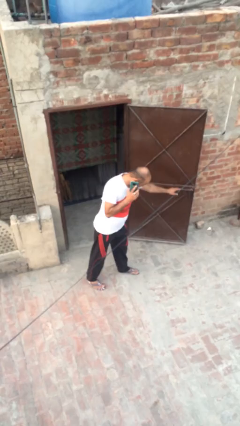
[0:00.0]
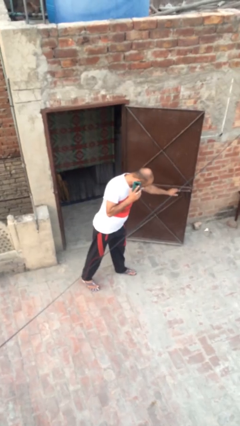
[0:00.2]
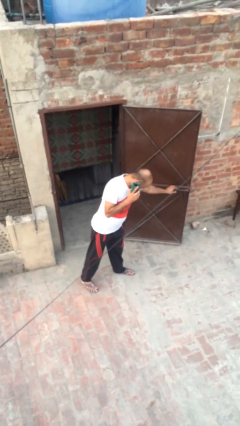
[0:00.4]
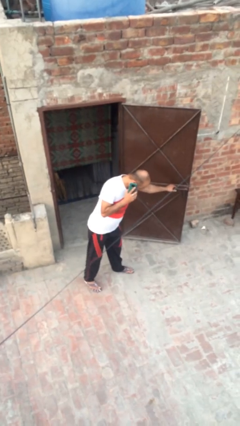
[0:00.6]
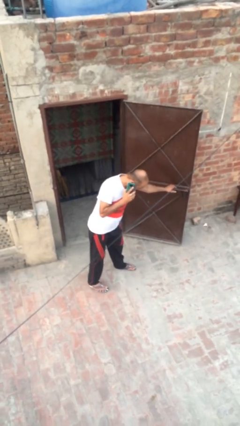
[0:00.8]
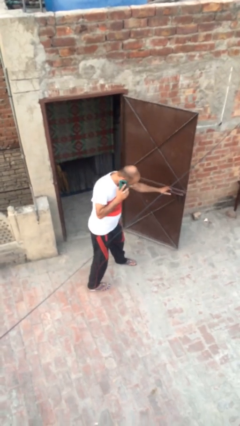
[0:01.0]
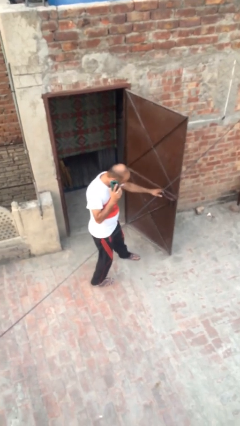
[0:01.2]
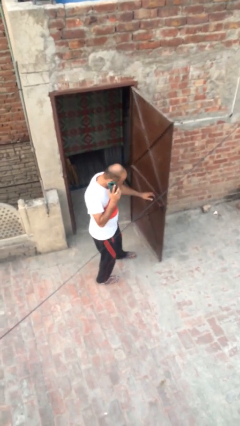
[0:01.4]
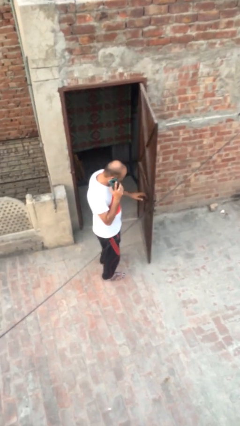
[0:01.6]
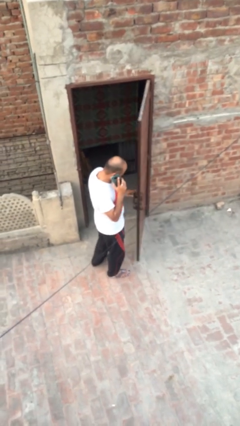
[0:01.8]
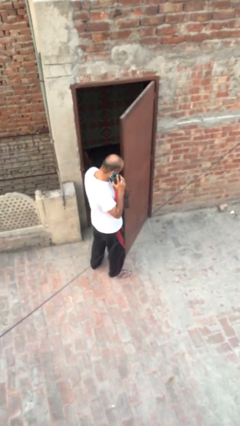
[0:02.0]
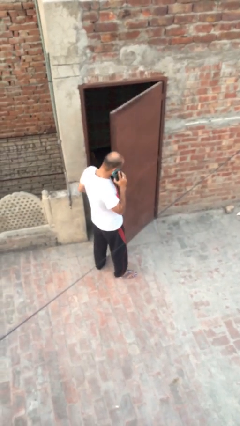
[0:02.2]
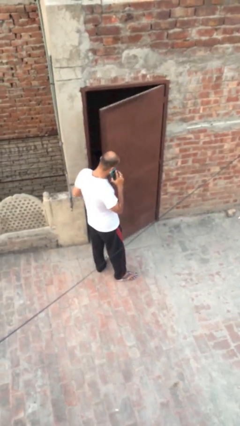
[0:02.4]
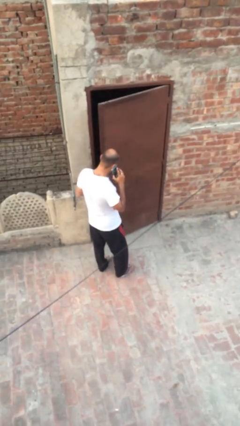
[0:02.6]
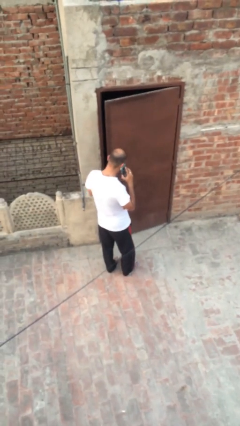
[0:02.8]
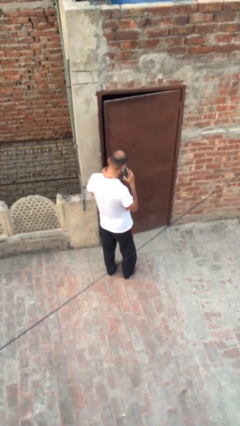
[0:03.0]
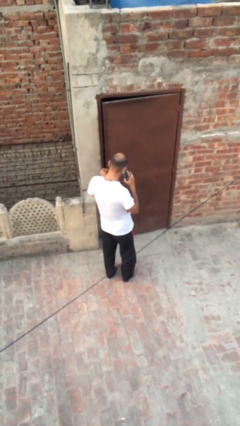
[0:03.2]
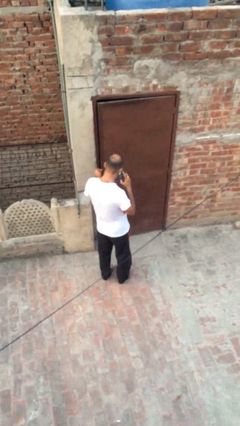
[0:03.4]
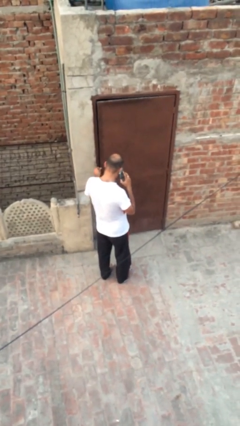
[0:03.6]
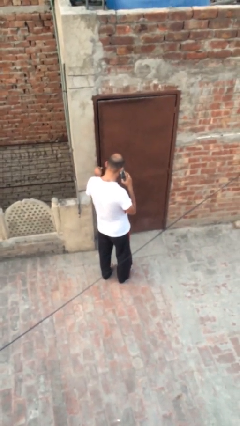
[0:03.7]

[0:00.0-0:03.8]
person closes facility door

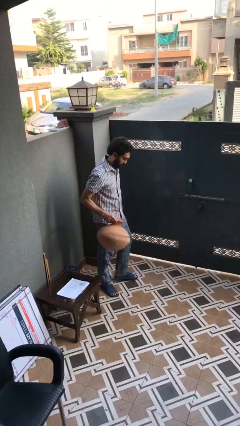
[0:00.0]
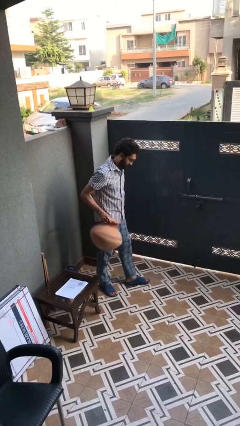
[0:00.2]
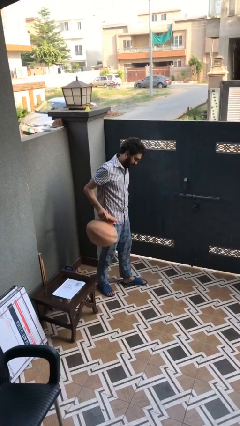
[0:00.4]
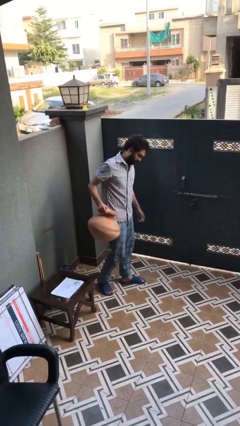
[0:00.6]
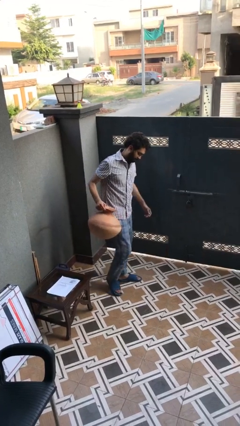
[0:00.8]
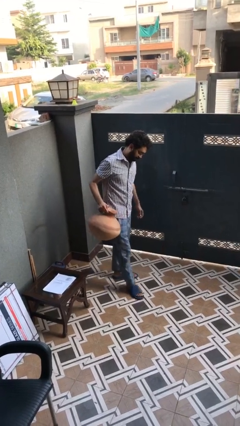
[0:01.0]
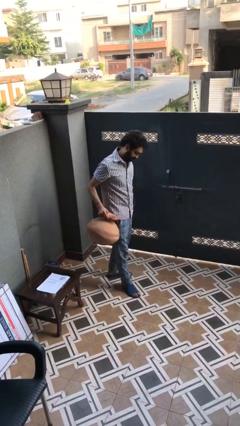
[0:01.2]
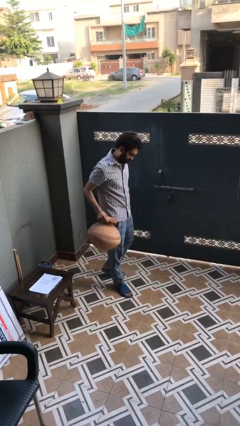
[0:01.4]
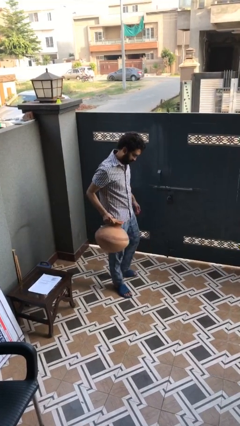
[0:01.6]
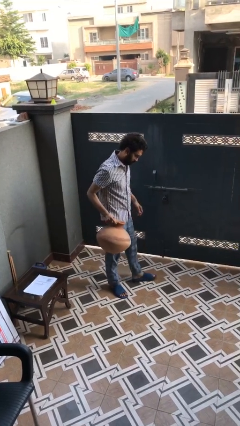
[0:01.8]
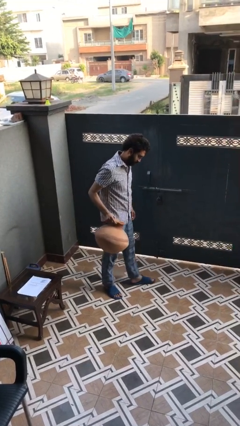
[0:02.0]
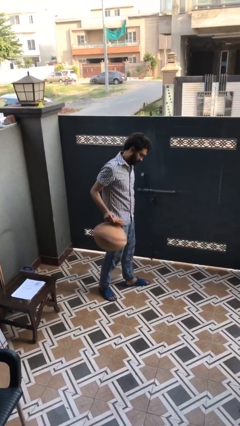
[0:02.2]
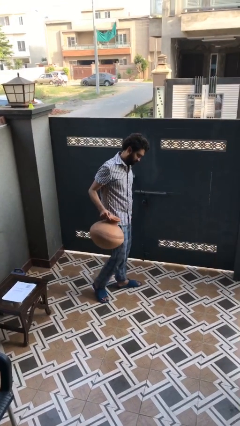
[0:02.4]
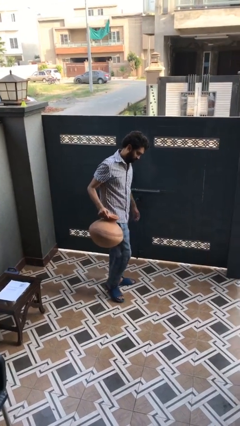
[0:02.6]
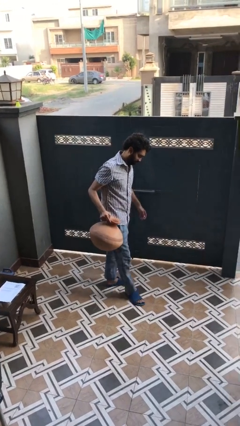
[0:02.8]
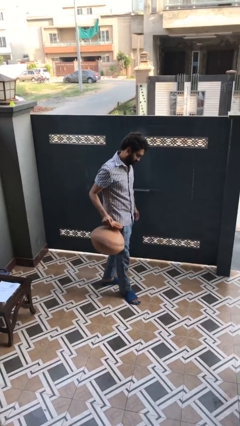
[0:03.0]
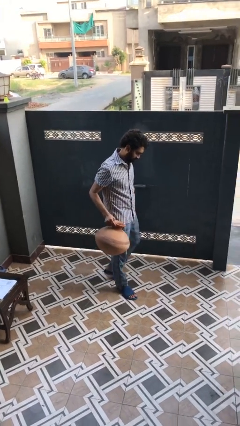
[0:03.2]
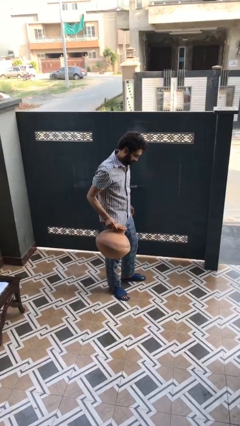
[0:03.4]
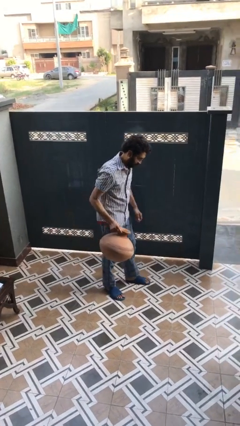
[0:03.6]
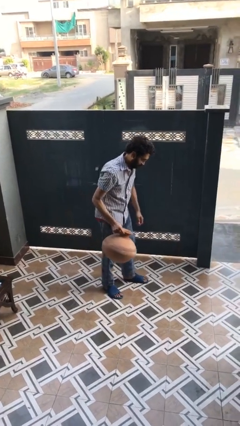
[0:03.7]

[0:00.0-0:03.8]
person carries heavy object

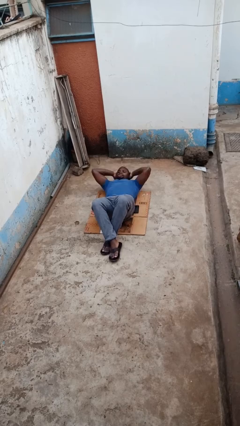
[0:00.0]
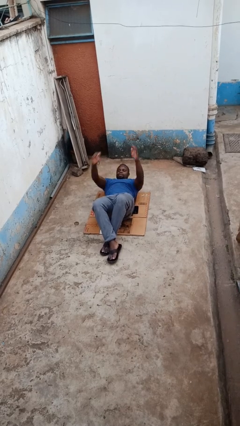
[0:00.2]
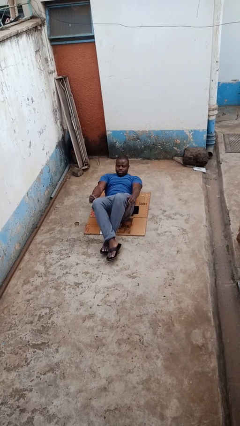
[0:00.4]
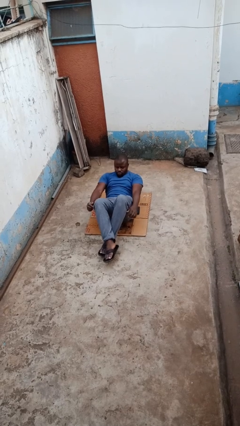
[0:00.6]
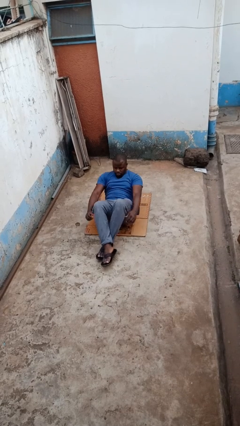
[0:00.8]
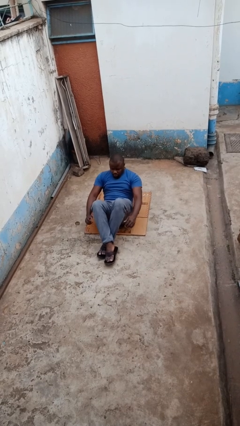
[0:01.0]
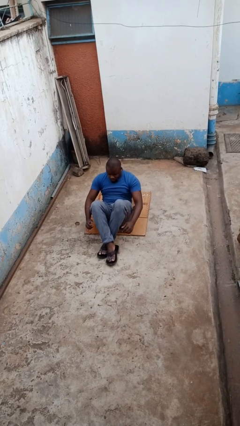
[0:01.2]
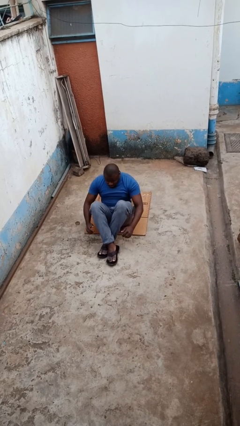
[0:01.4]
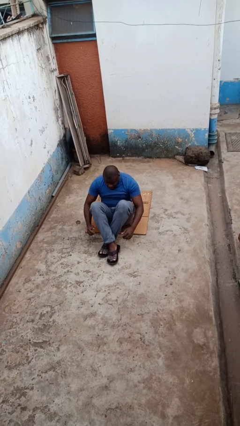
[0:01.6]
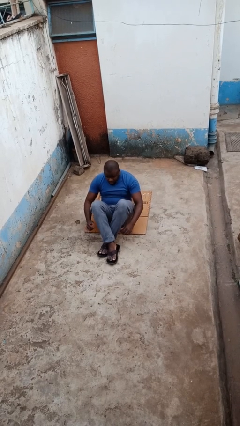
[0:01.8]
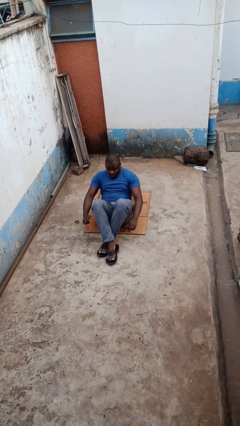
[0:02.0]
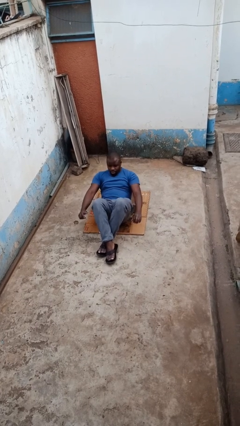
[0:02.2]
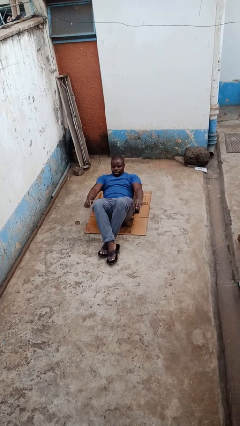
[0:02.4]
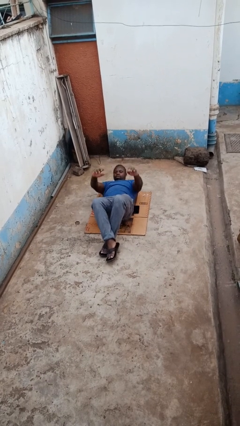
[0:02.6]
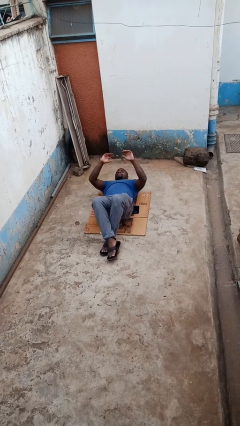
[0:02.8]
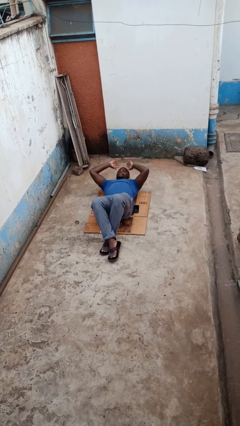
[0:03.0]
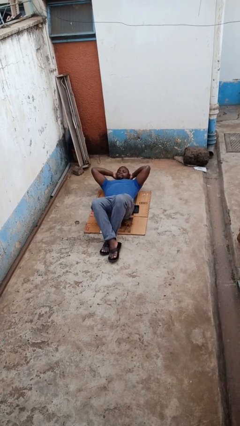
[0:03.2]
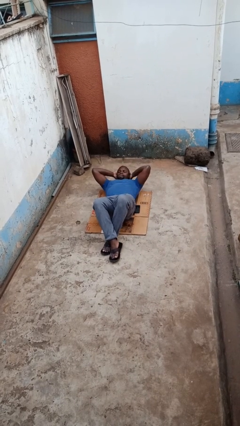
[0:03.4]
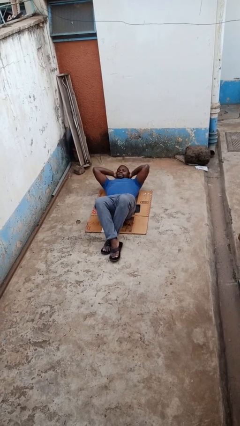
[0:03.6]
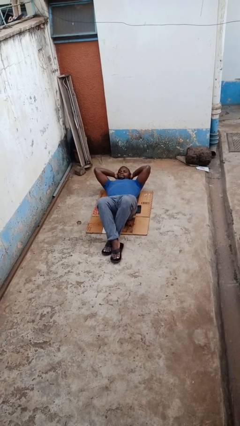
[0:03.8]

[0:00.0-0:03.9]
person exercises with situp

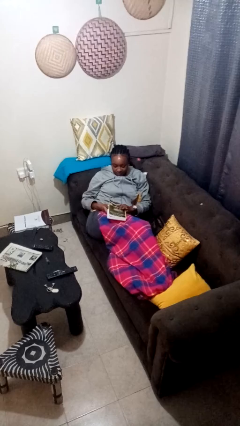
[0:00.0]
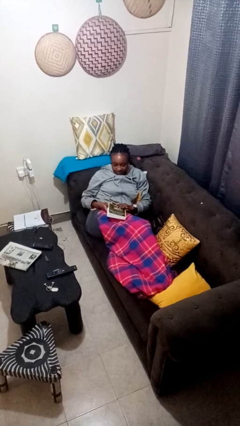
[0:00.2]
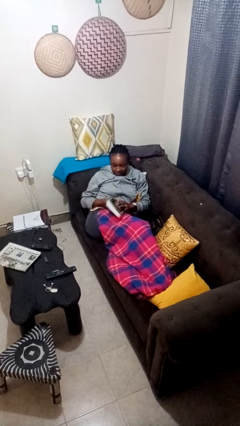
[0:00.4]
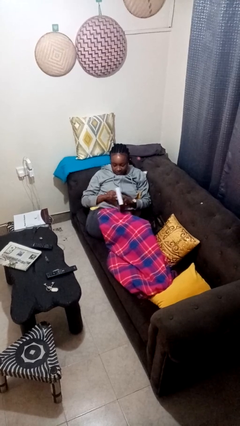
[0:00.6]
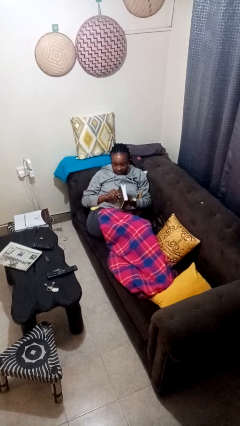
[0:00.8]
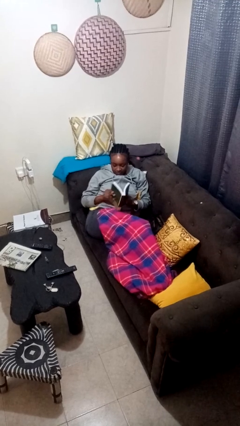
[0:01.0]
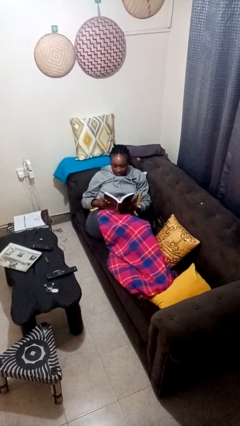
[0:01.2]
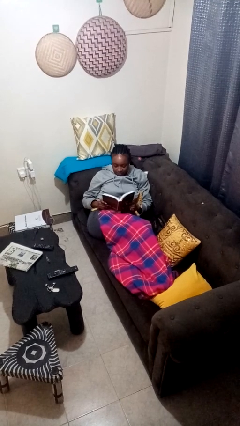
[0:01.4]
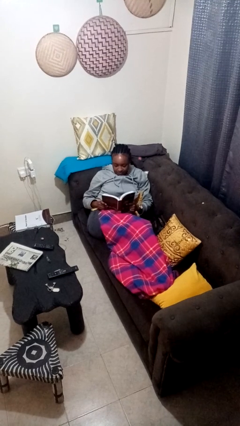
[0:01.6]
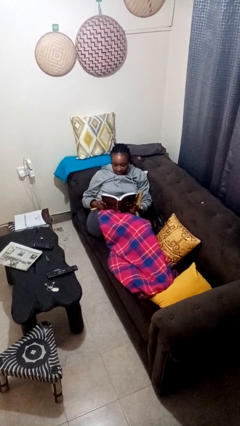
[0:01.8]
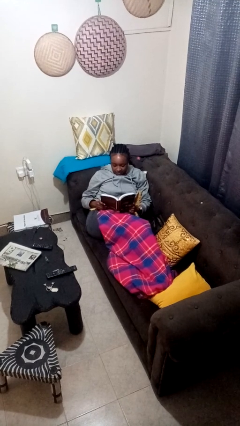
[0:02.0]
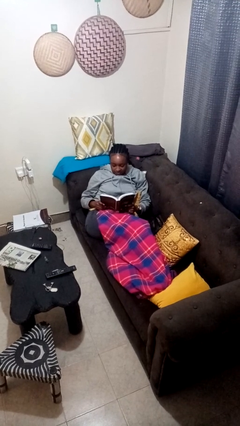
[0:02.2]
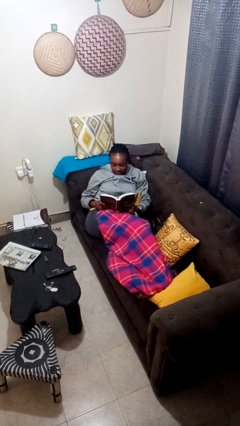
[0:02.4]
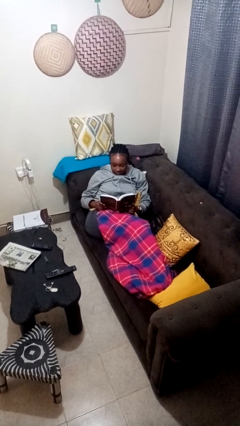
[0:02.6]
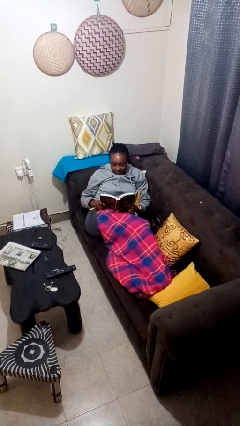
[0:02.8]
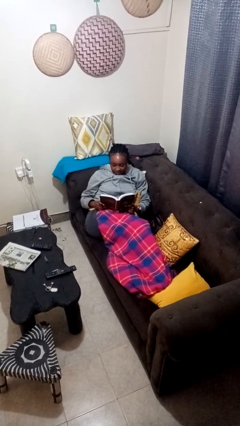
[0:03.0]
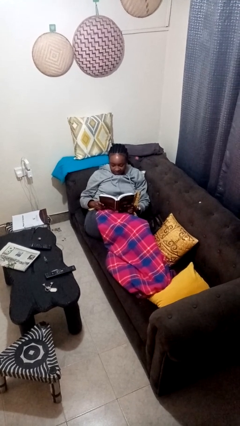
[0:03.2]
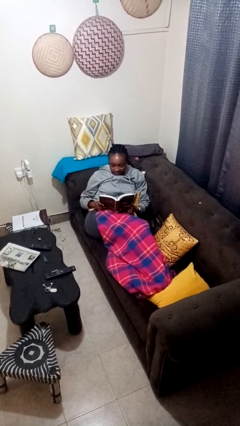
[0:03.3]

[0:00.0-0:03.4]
person reads book

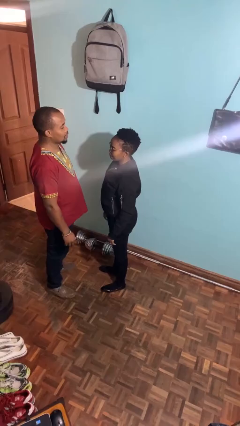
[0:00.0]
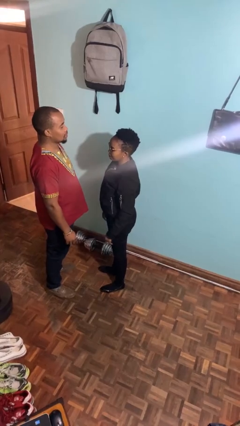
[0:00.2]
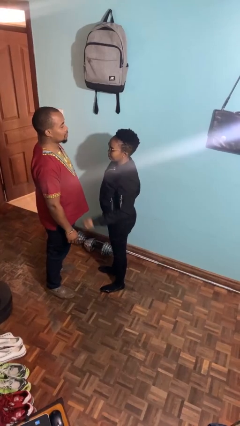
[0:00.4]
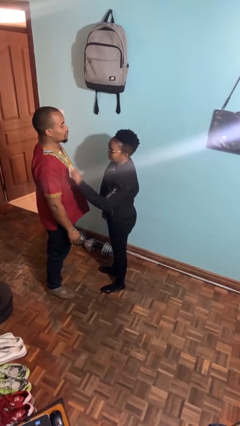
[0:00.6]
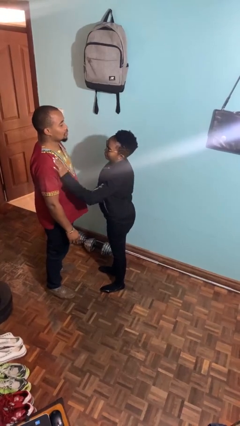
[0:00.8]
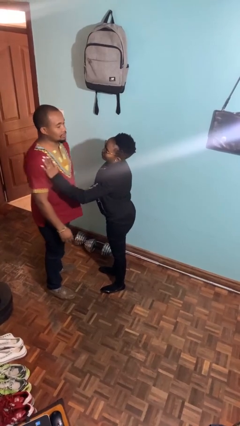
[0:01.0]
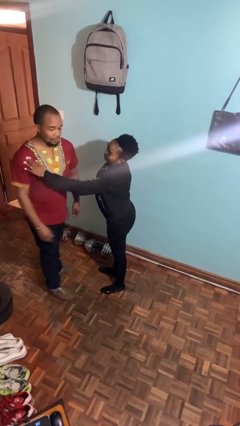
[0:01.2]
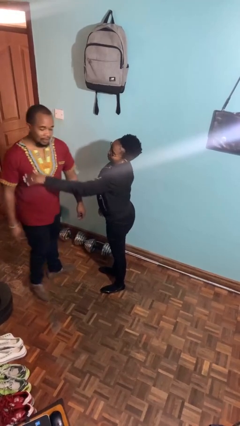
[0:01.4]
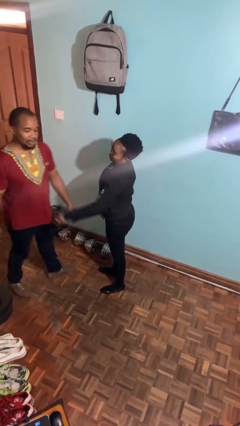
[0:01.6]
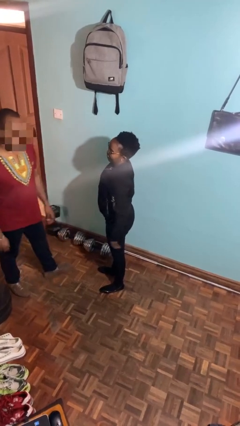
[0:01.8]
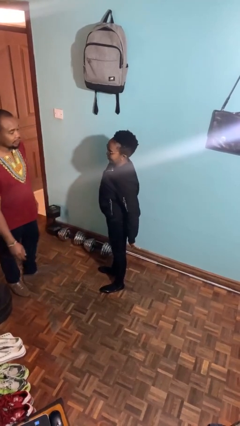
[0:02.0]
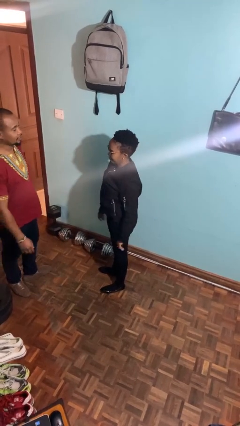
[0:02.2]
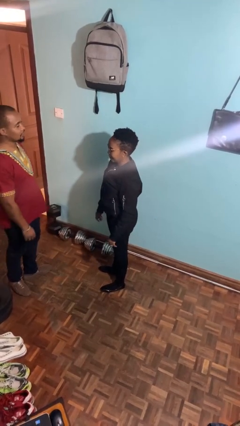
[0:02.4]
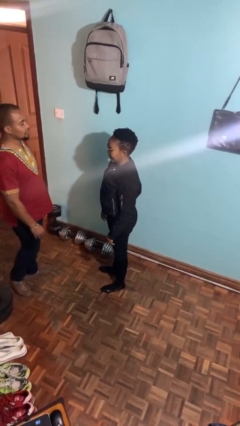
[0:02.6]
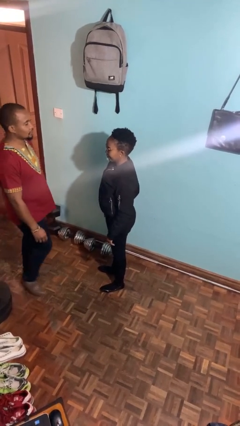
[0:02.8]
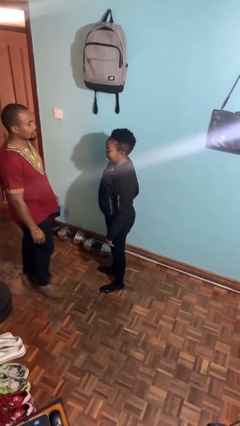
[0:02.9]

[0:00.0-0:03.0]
person shoves person
